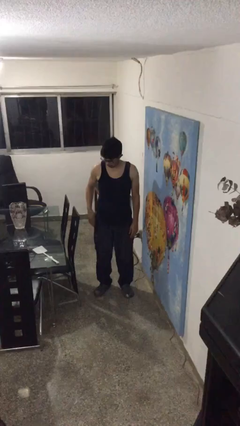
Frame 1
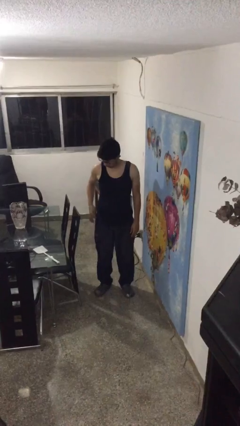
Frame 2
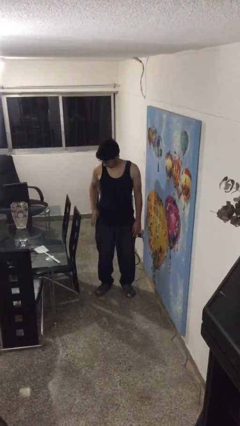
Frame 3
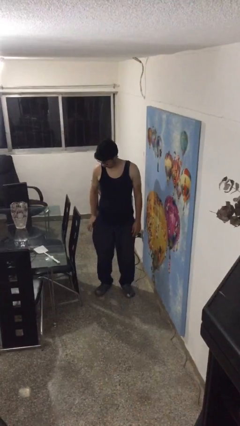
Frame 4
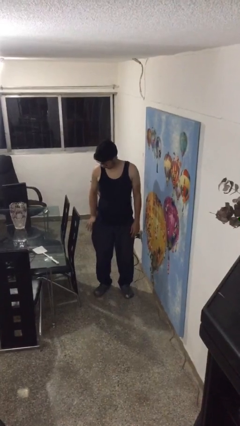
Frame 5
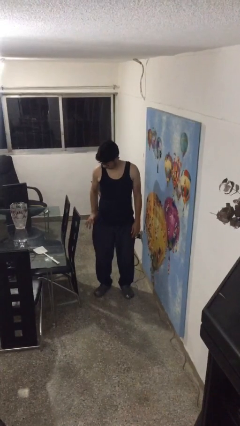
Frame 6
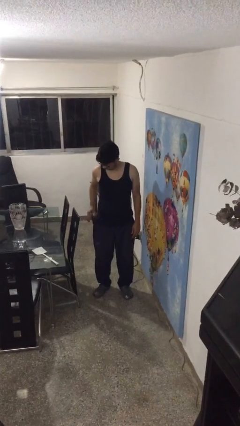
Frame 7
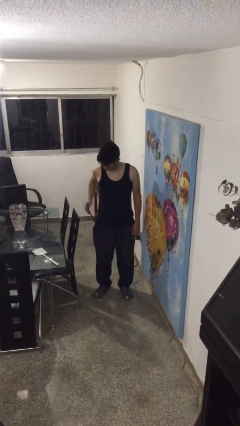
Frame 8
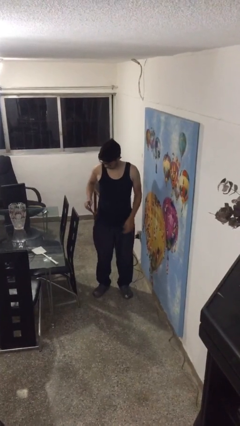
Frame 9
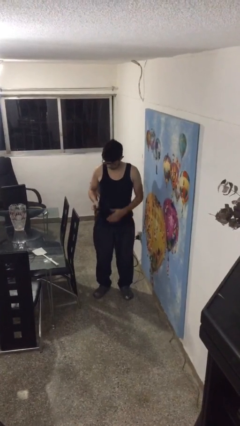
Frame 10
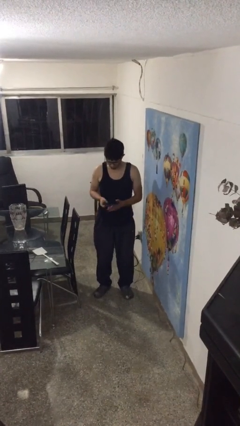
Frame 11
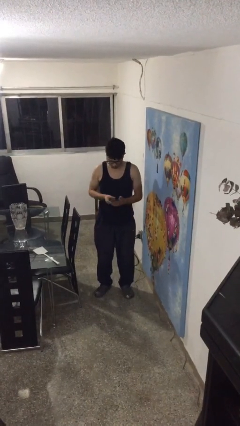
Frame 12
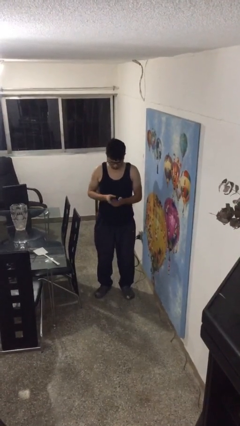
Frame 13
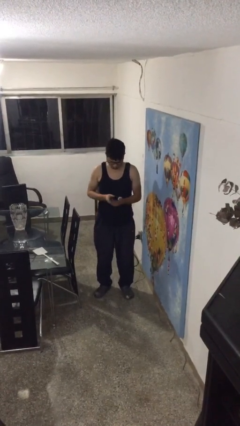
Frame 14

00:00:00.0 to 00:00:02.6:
person takes phone from pocket

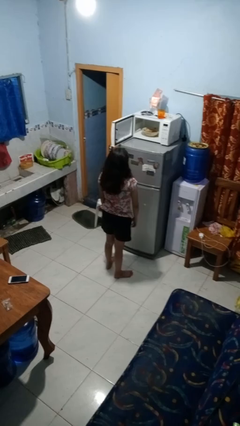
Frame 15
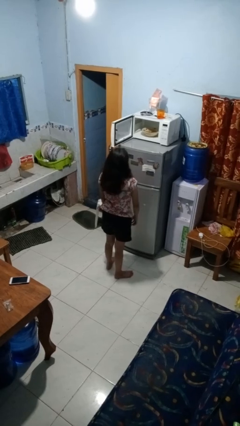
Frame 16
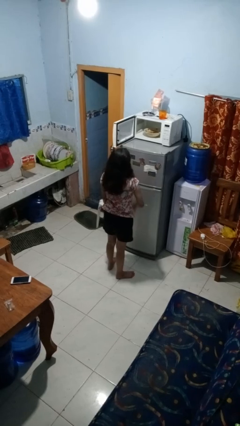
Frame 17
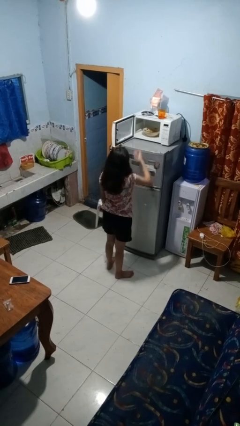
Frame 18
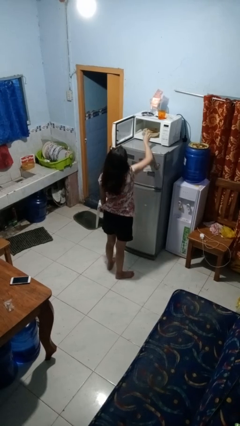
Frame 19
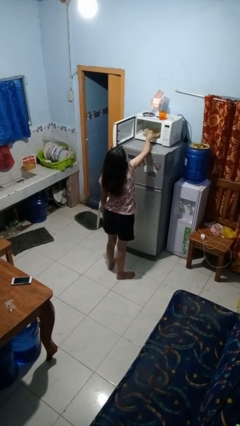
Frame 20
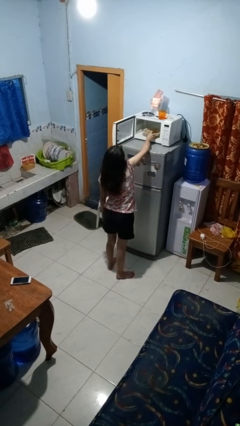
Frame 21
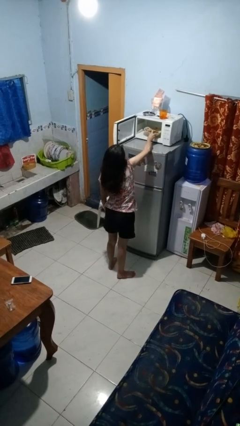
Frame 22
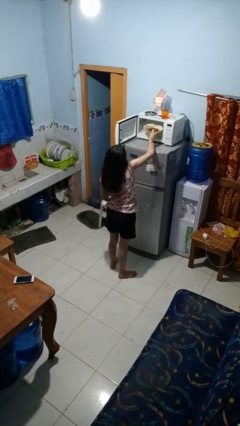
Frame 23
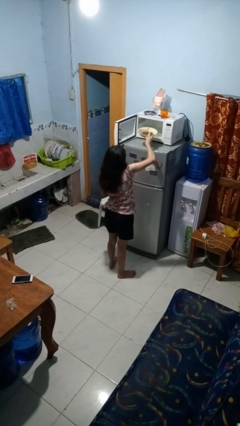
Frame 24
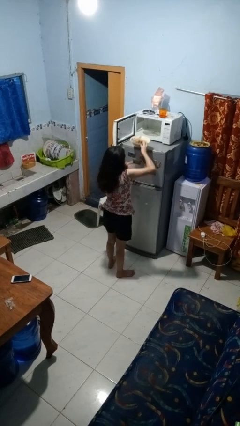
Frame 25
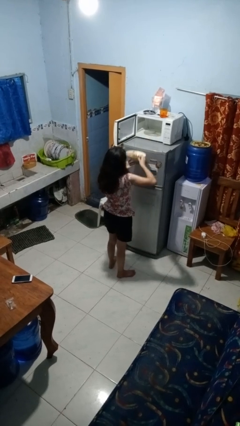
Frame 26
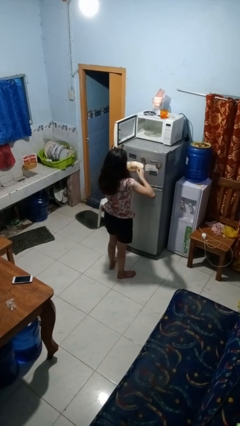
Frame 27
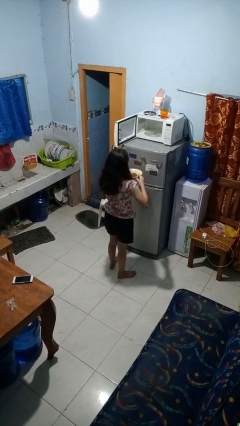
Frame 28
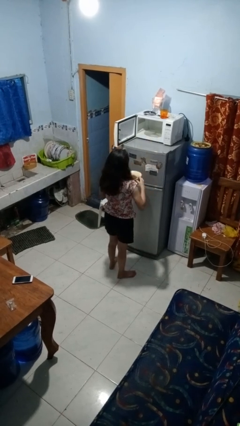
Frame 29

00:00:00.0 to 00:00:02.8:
person takes object from microwave

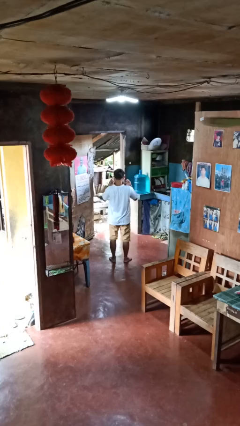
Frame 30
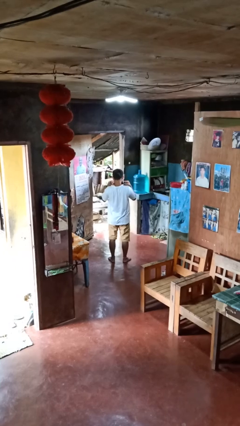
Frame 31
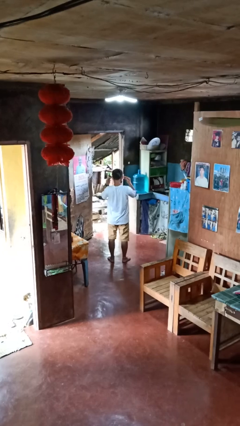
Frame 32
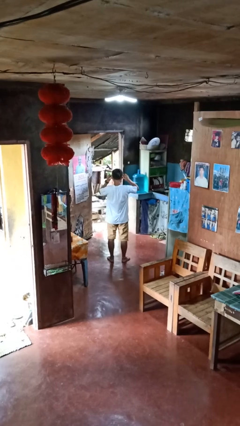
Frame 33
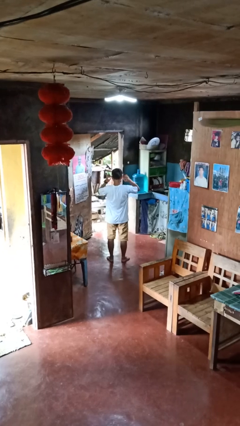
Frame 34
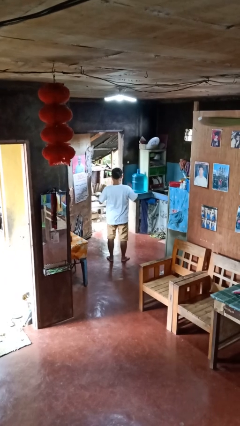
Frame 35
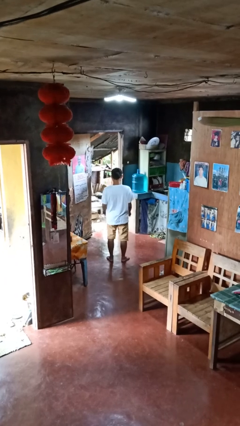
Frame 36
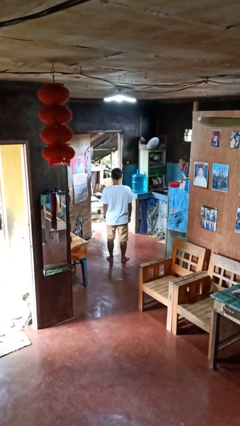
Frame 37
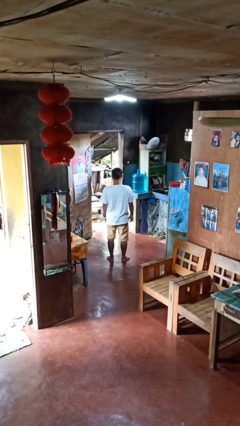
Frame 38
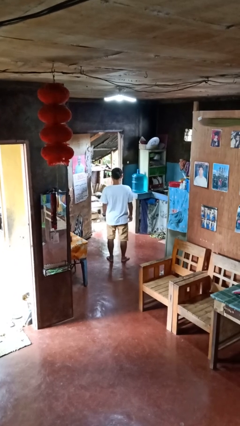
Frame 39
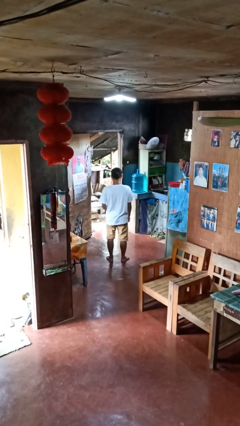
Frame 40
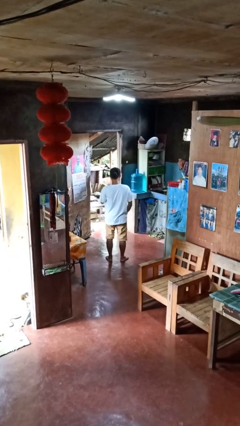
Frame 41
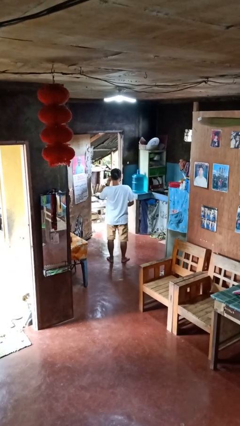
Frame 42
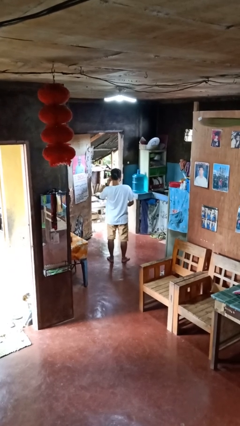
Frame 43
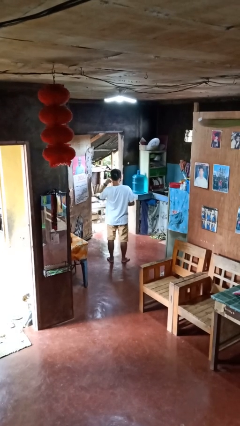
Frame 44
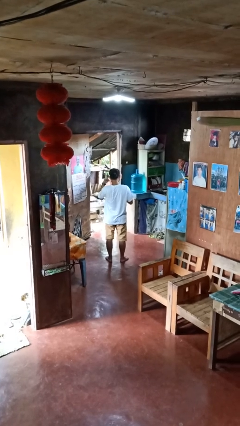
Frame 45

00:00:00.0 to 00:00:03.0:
person puts on facemask

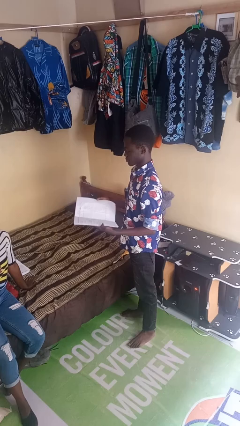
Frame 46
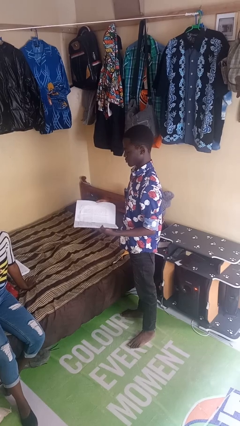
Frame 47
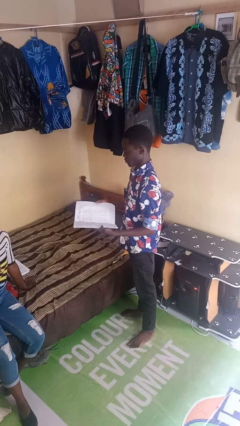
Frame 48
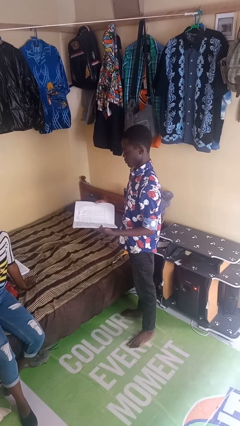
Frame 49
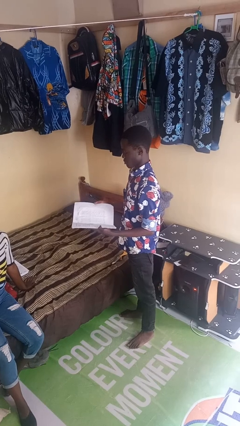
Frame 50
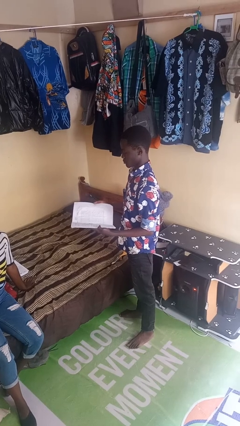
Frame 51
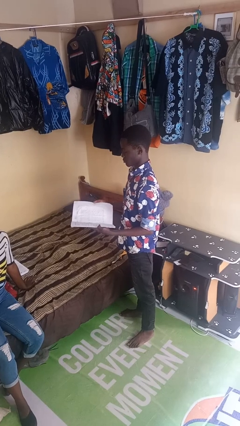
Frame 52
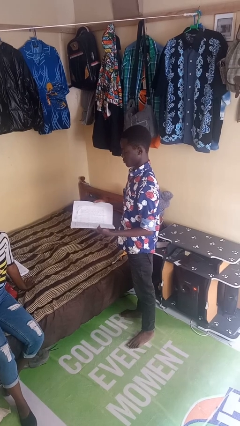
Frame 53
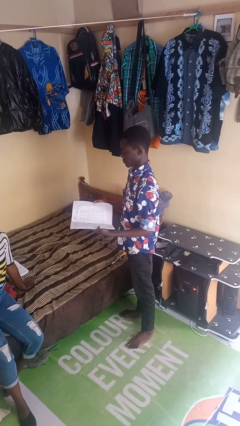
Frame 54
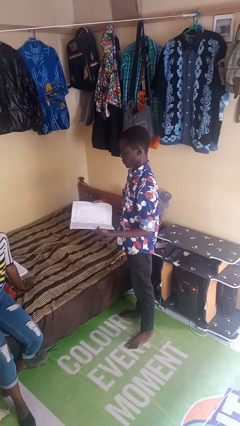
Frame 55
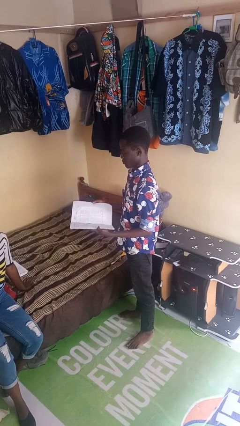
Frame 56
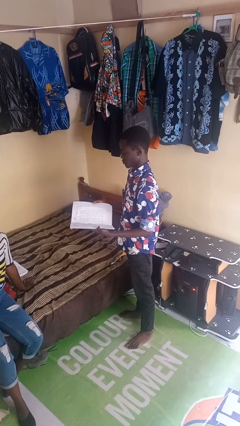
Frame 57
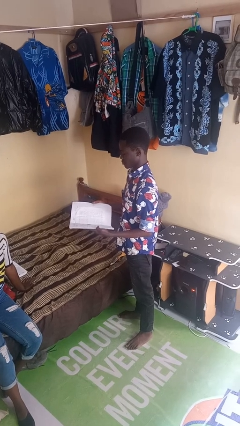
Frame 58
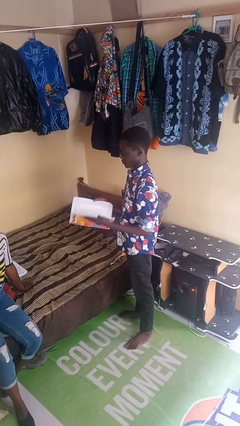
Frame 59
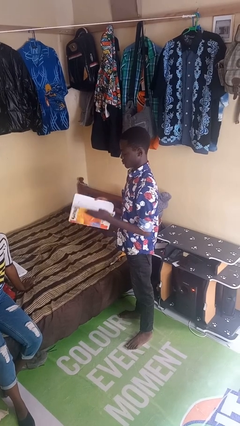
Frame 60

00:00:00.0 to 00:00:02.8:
person reads book

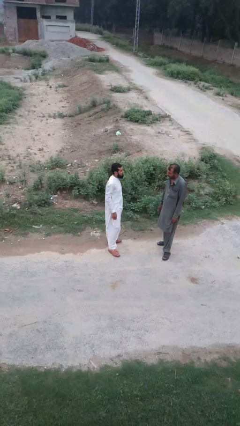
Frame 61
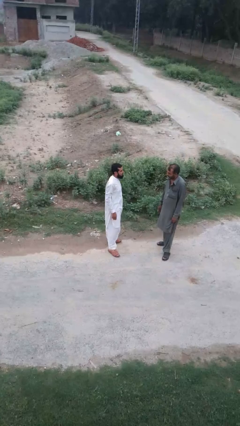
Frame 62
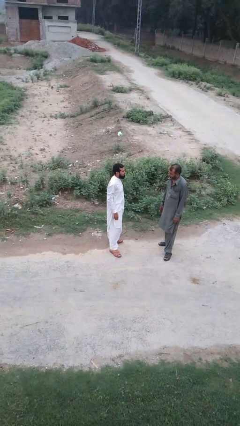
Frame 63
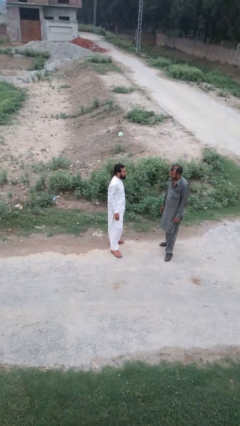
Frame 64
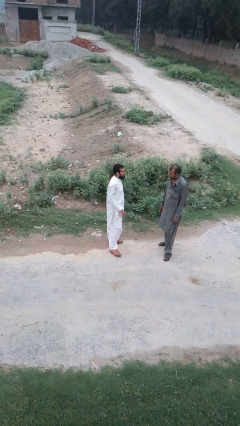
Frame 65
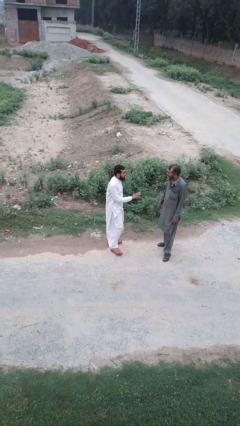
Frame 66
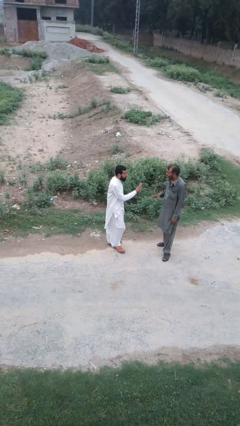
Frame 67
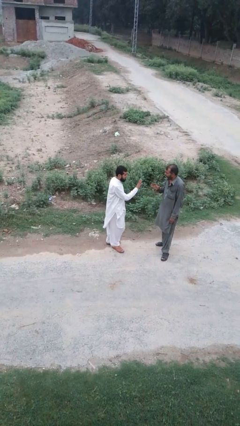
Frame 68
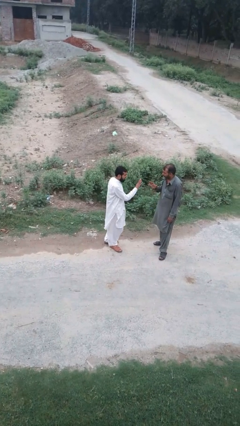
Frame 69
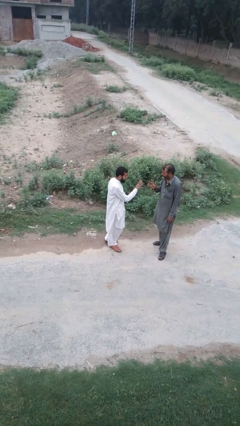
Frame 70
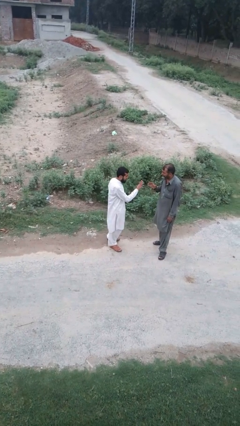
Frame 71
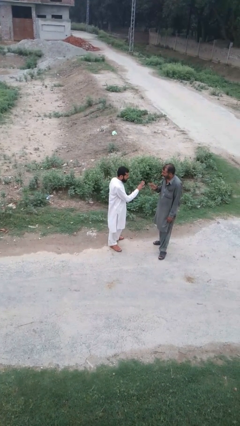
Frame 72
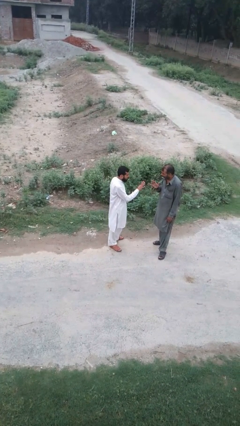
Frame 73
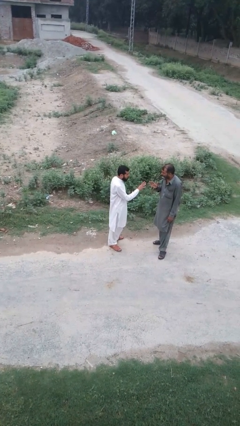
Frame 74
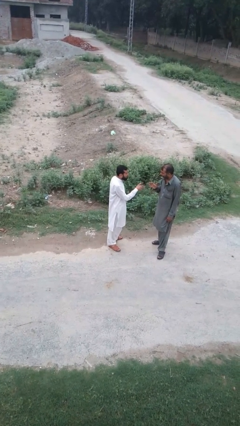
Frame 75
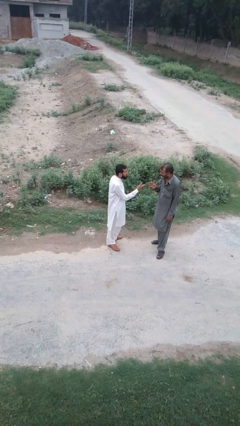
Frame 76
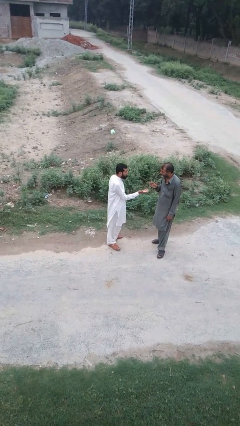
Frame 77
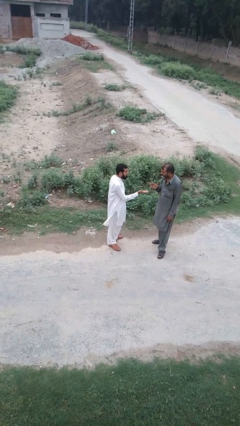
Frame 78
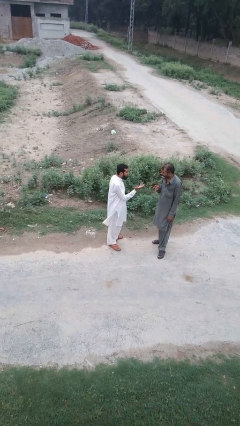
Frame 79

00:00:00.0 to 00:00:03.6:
person talks to person

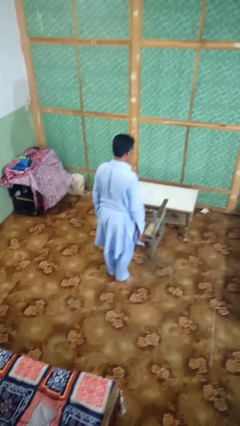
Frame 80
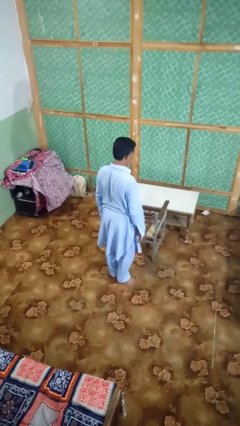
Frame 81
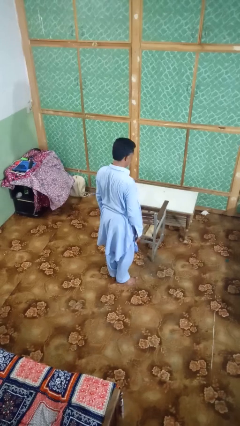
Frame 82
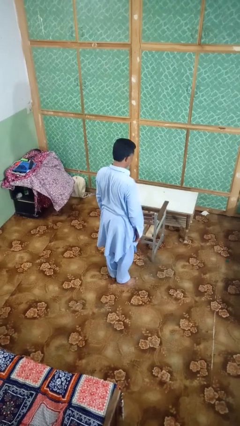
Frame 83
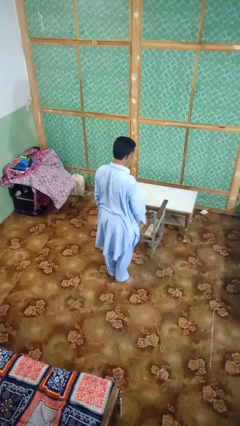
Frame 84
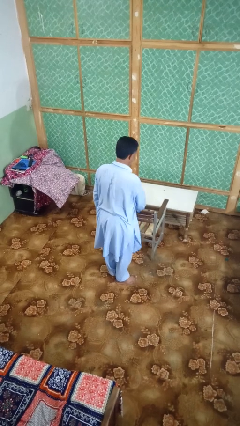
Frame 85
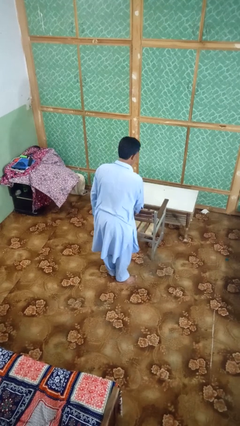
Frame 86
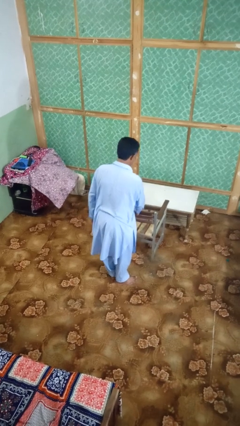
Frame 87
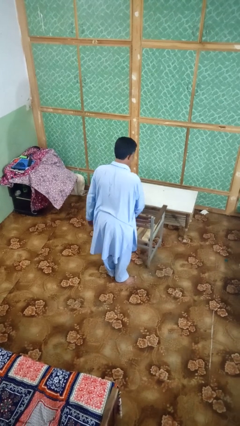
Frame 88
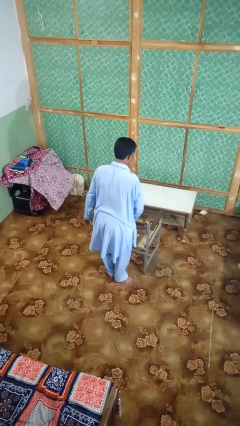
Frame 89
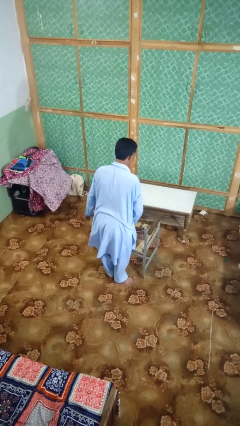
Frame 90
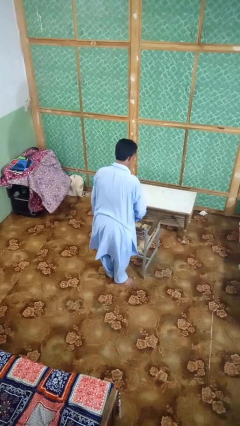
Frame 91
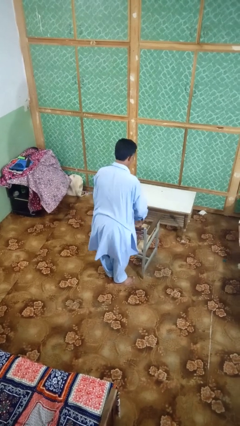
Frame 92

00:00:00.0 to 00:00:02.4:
person pulls out chair

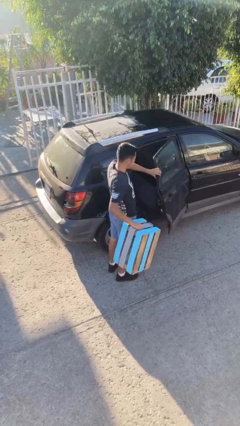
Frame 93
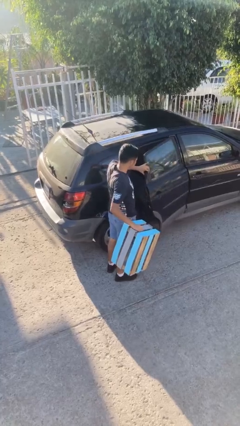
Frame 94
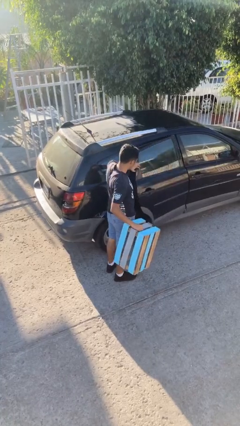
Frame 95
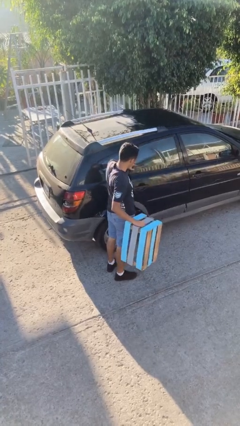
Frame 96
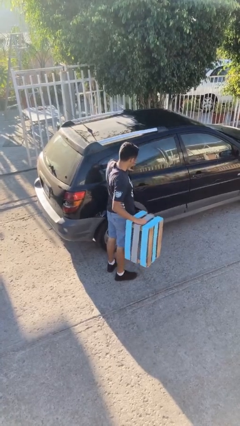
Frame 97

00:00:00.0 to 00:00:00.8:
person closes car door
